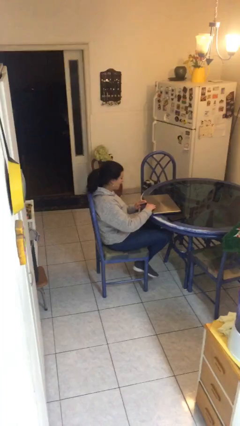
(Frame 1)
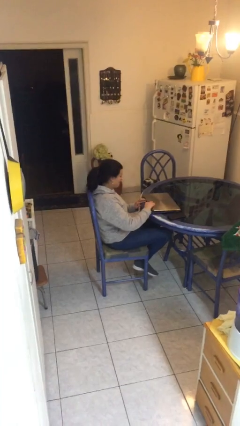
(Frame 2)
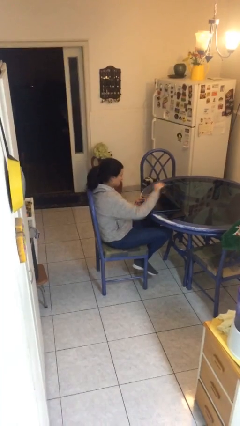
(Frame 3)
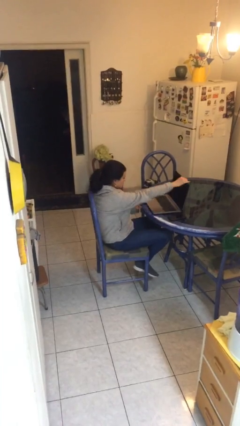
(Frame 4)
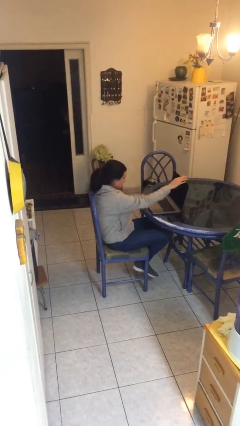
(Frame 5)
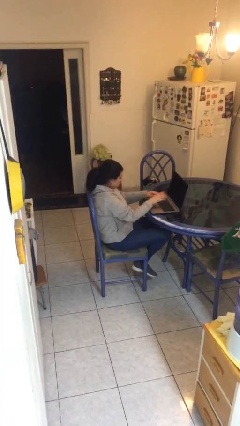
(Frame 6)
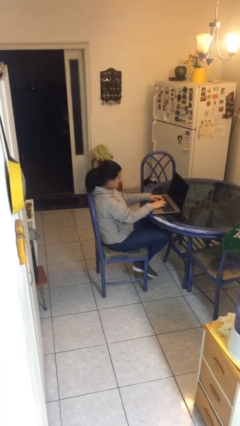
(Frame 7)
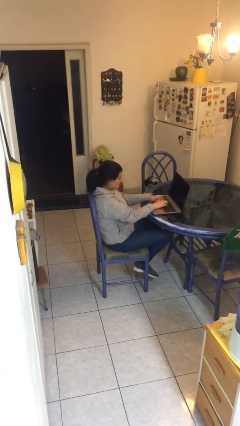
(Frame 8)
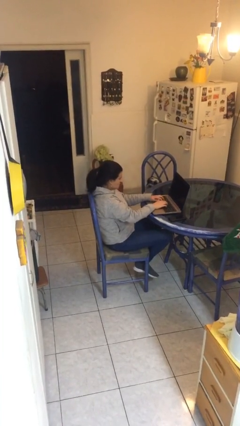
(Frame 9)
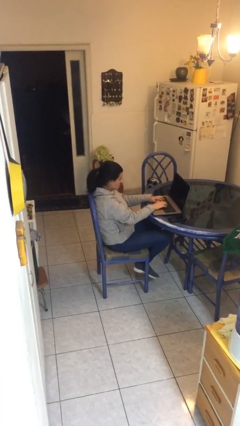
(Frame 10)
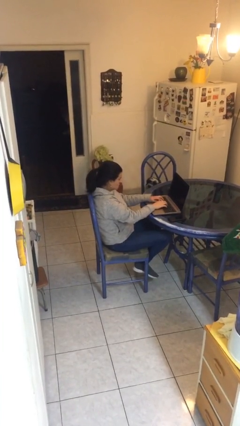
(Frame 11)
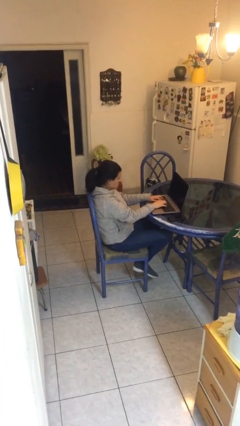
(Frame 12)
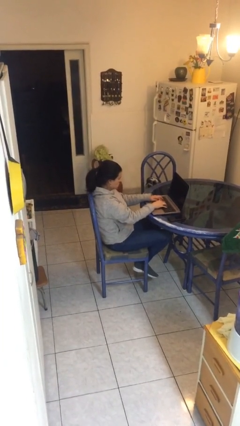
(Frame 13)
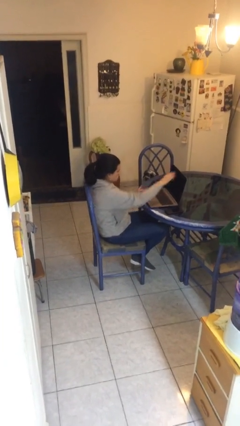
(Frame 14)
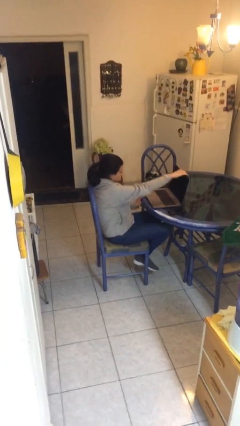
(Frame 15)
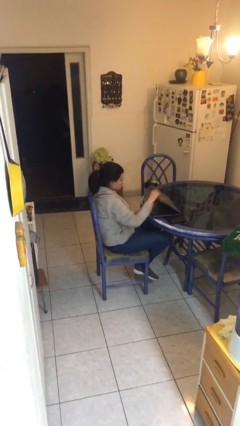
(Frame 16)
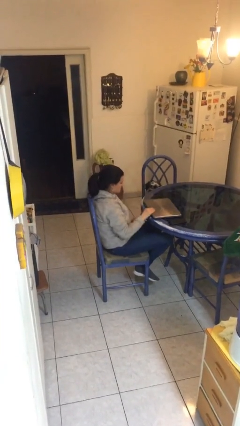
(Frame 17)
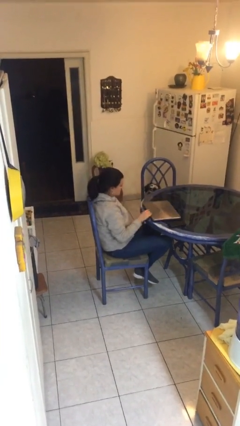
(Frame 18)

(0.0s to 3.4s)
person interacts with laptop

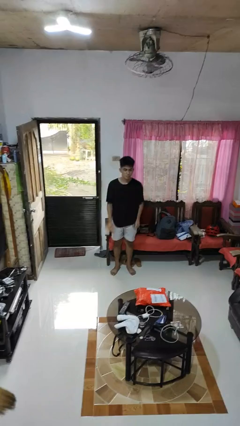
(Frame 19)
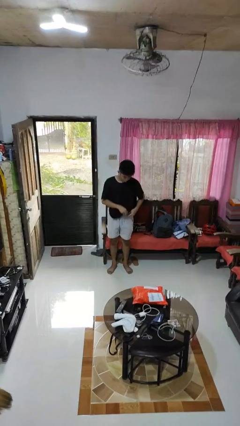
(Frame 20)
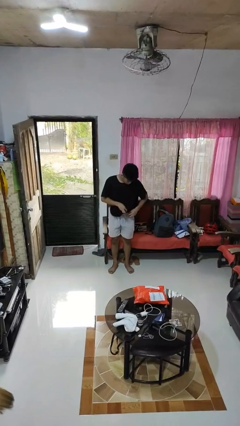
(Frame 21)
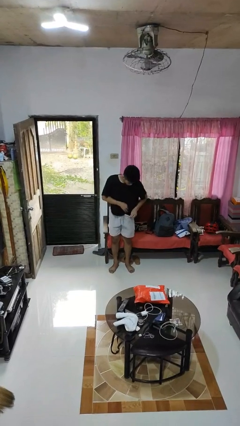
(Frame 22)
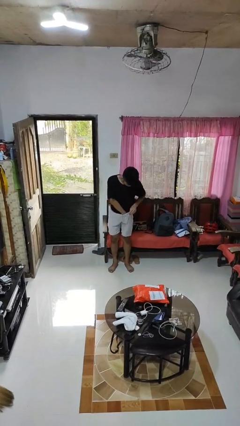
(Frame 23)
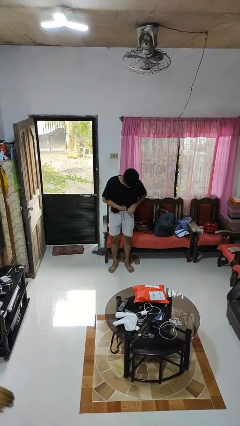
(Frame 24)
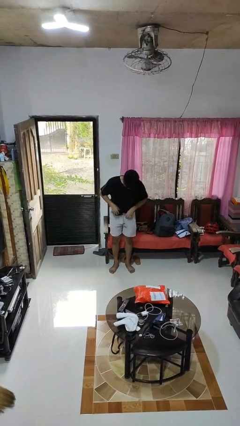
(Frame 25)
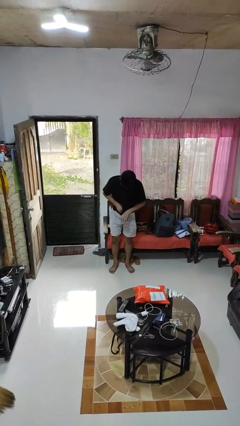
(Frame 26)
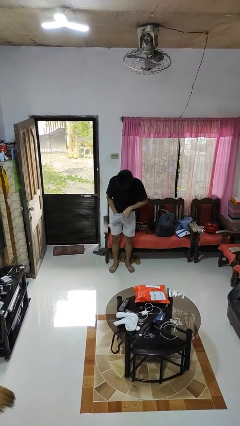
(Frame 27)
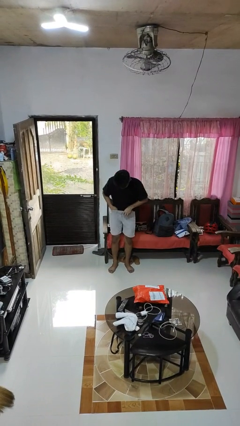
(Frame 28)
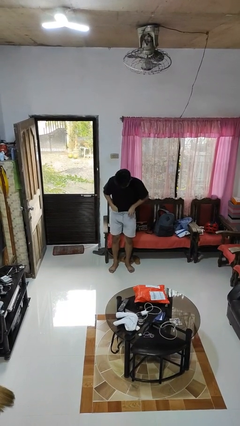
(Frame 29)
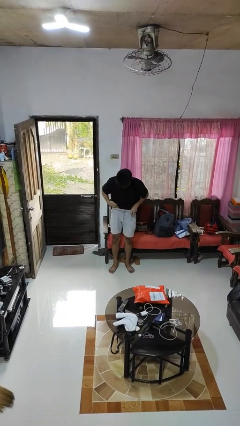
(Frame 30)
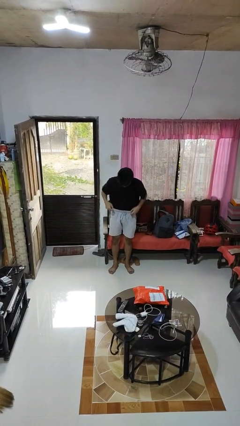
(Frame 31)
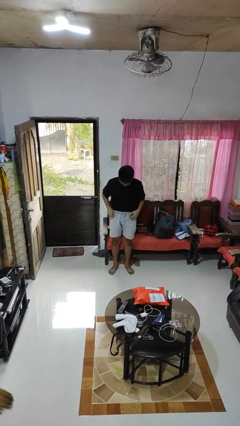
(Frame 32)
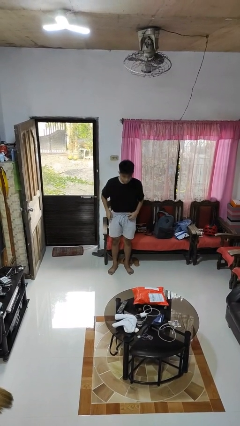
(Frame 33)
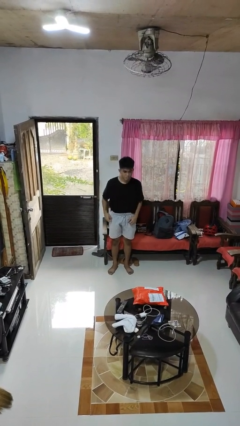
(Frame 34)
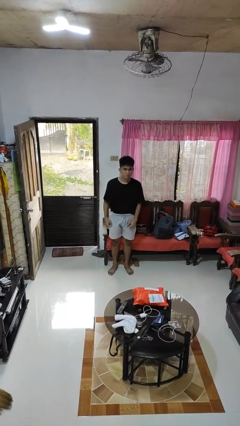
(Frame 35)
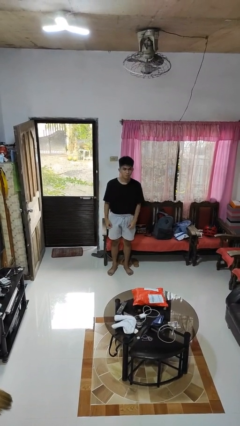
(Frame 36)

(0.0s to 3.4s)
person tucks in shirt

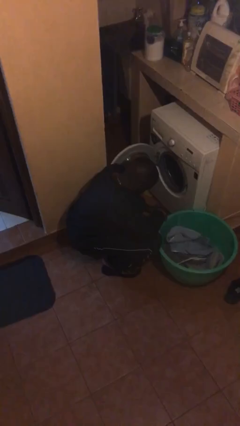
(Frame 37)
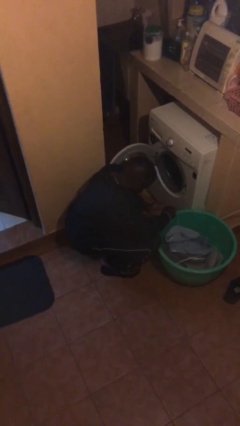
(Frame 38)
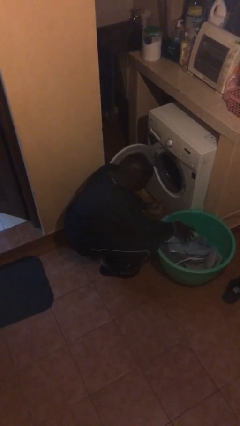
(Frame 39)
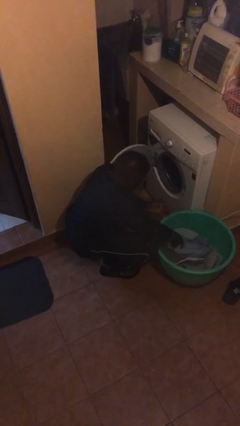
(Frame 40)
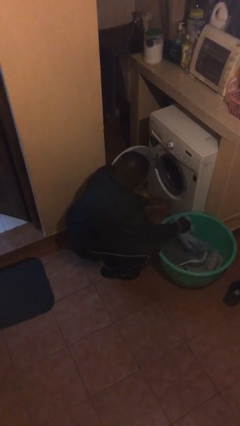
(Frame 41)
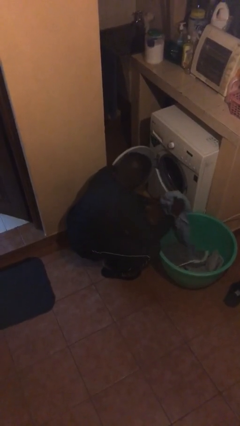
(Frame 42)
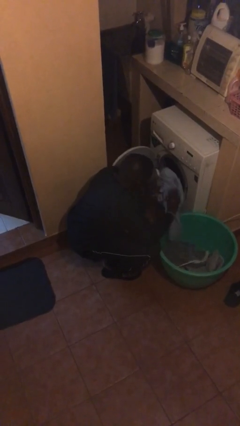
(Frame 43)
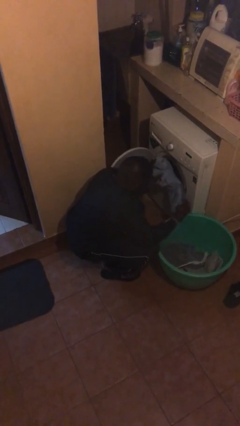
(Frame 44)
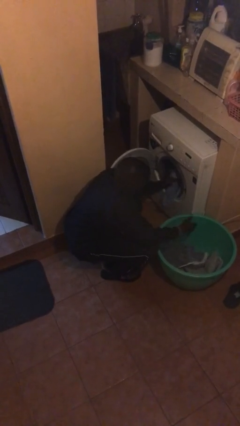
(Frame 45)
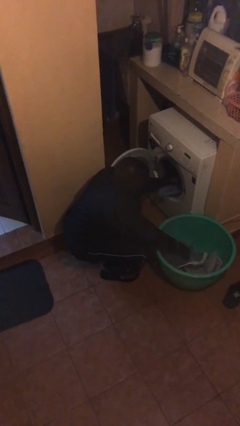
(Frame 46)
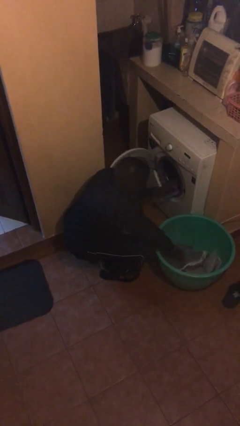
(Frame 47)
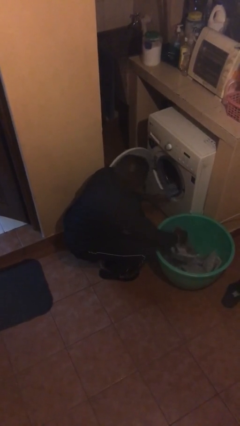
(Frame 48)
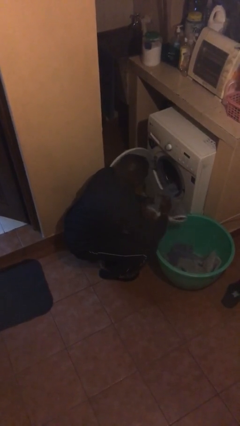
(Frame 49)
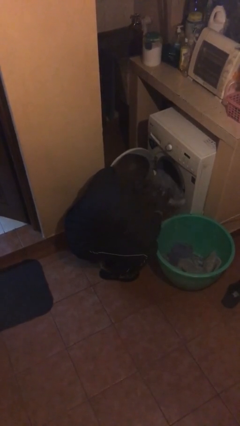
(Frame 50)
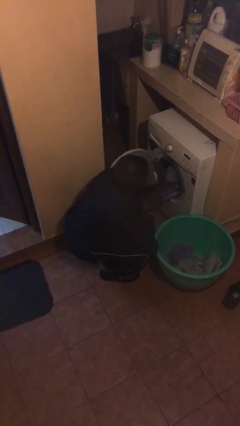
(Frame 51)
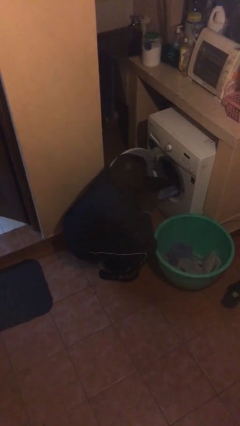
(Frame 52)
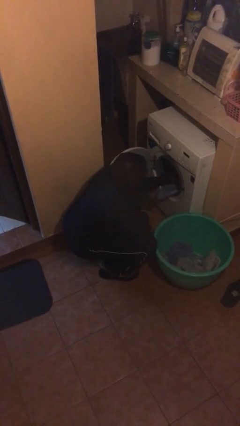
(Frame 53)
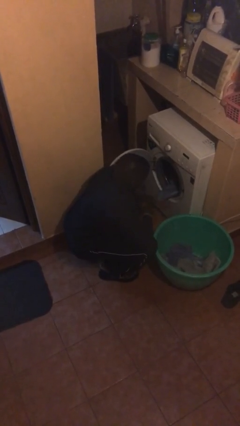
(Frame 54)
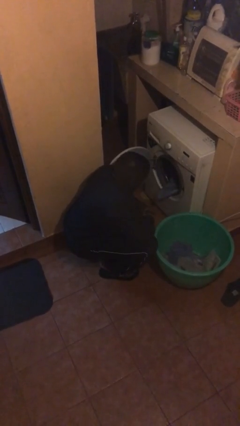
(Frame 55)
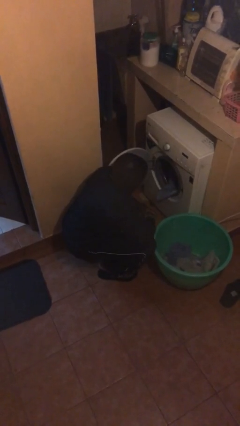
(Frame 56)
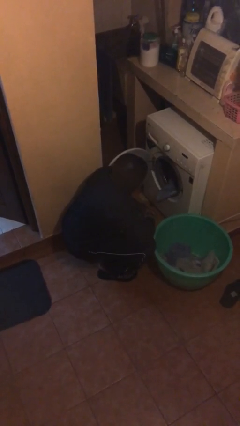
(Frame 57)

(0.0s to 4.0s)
person loads clotheswasher

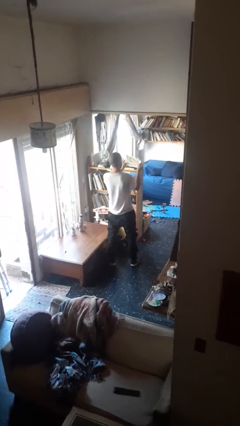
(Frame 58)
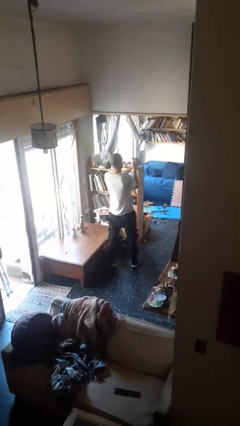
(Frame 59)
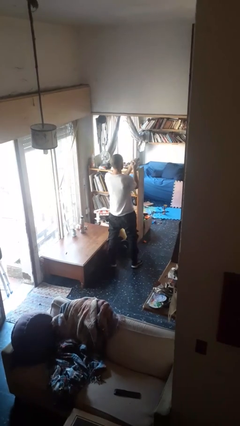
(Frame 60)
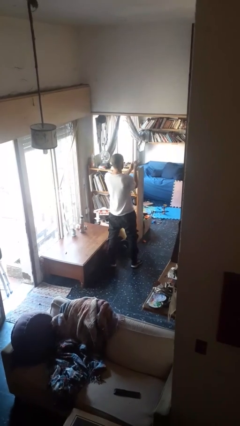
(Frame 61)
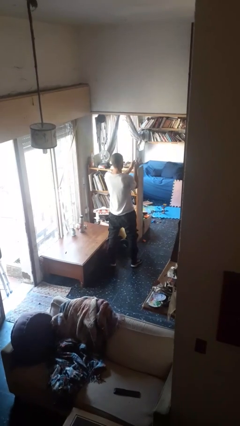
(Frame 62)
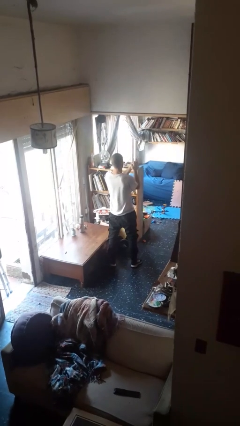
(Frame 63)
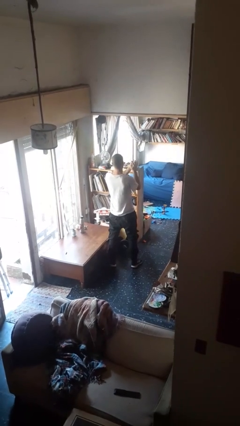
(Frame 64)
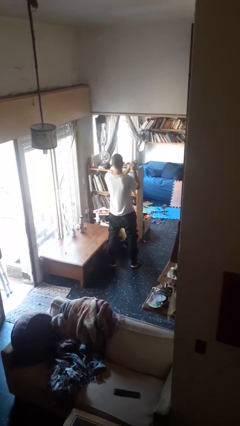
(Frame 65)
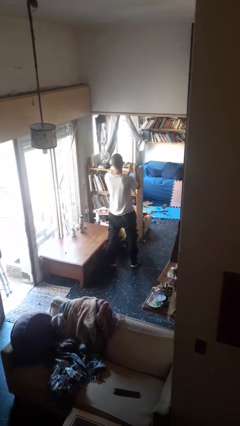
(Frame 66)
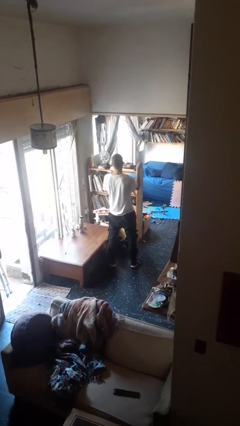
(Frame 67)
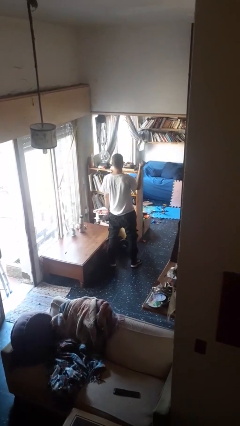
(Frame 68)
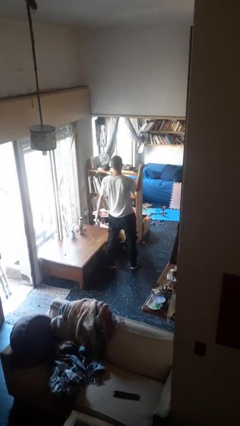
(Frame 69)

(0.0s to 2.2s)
person crumples paper

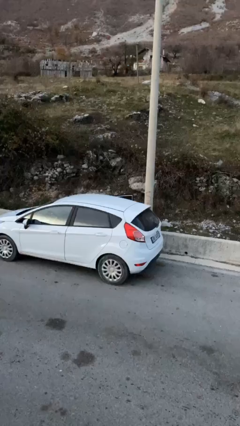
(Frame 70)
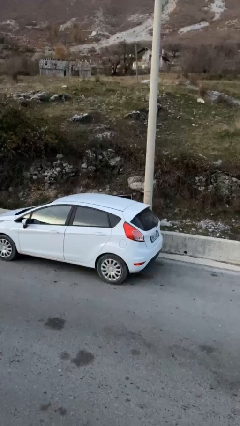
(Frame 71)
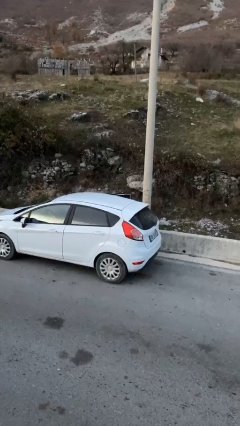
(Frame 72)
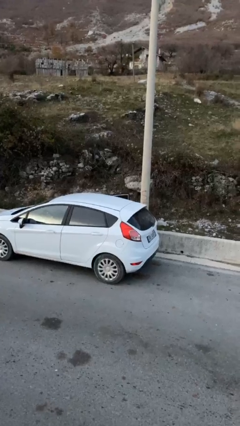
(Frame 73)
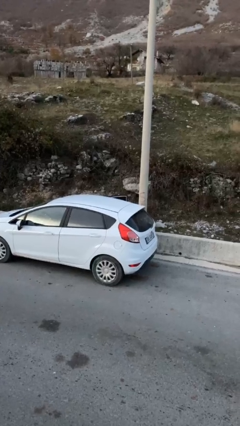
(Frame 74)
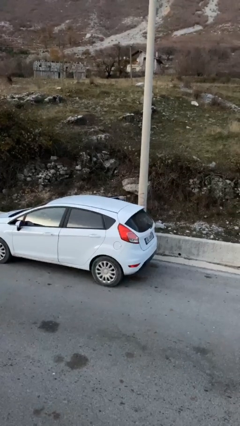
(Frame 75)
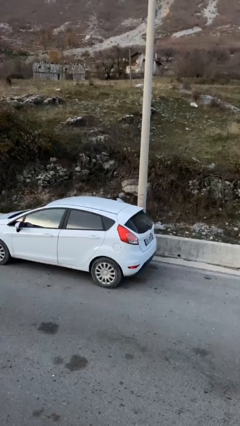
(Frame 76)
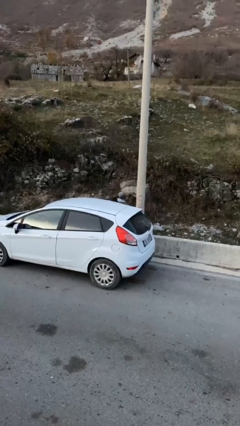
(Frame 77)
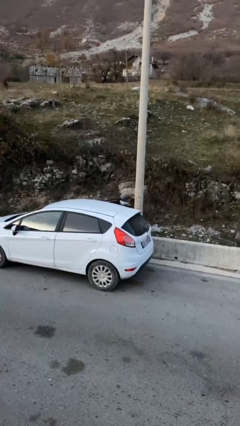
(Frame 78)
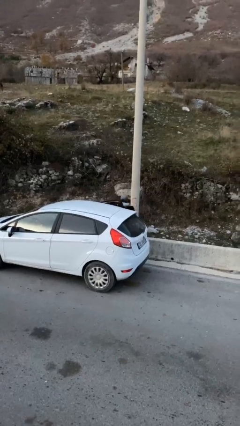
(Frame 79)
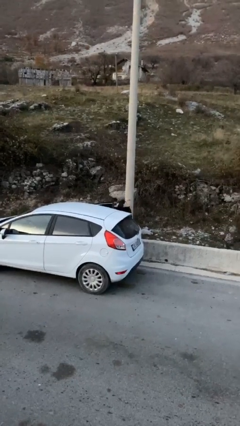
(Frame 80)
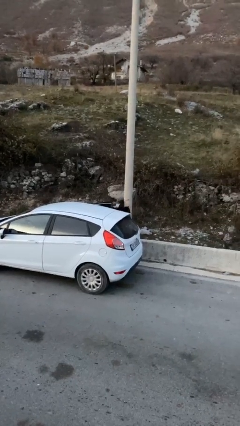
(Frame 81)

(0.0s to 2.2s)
person exits car

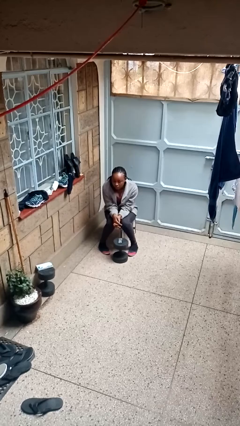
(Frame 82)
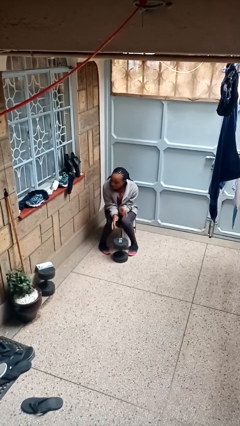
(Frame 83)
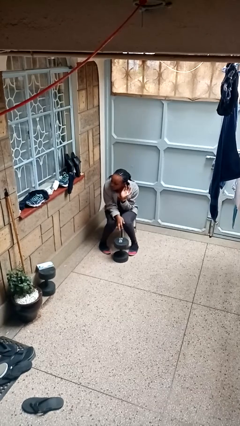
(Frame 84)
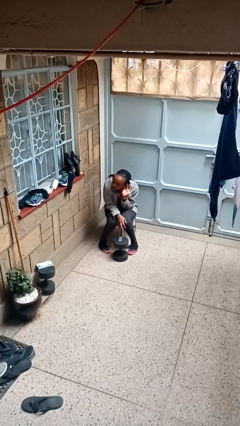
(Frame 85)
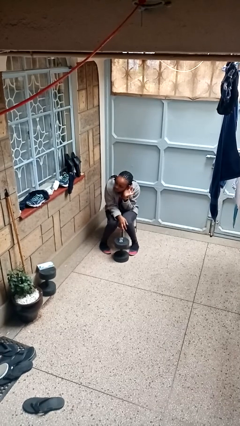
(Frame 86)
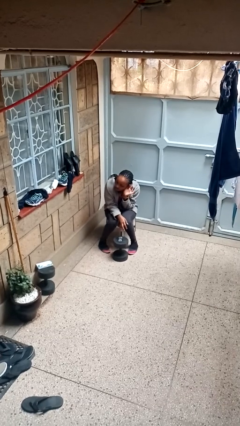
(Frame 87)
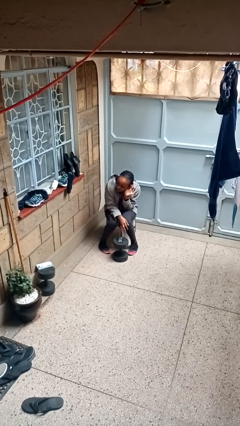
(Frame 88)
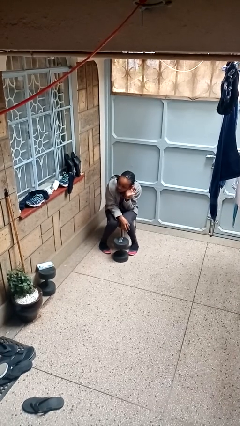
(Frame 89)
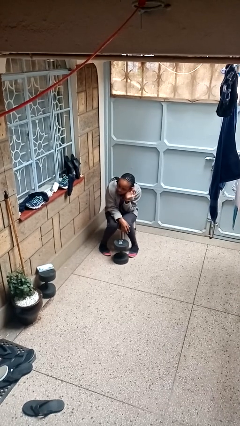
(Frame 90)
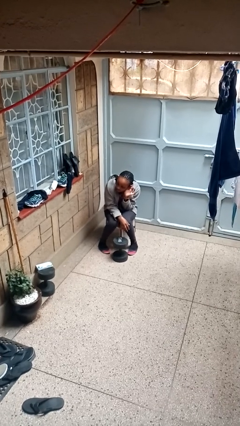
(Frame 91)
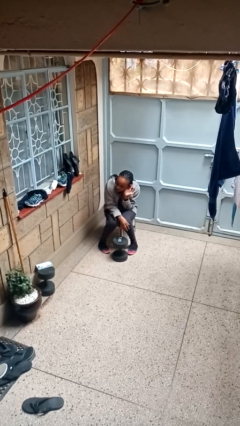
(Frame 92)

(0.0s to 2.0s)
person gestures listen closely
